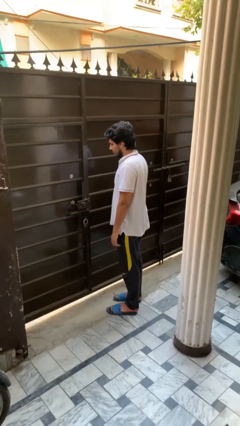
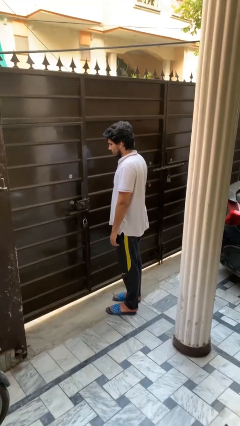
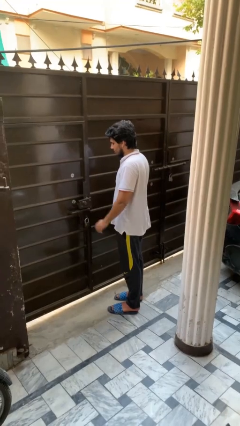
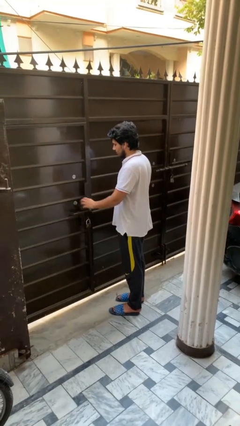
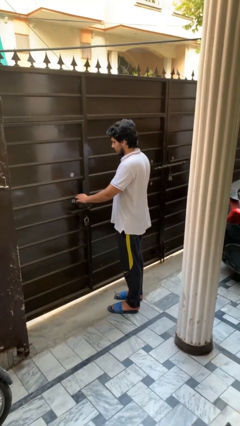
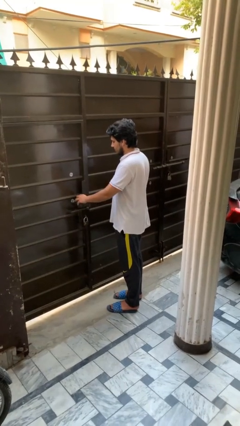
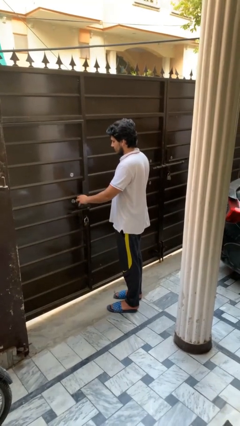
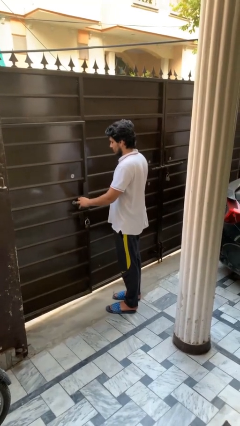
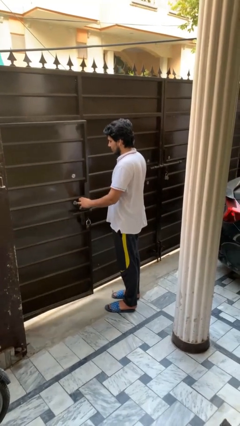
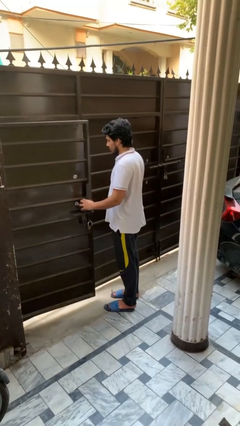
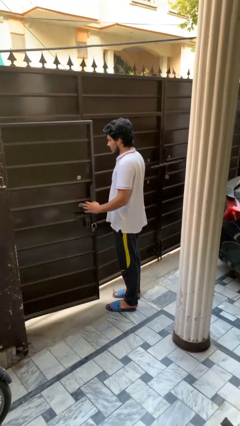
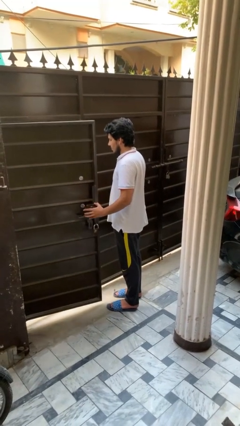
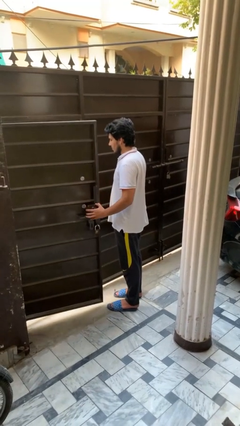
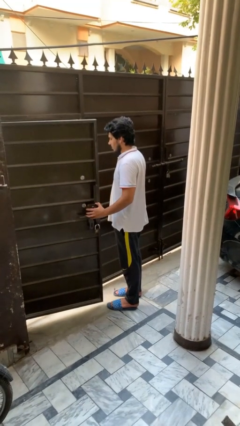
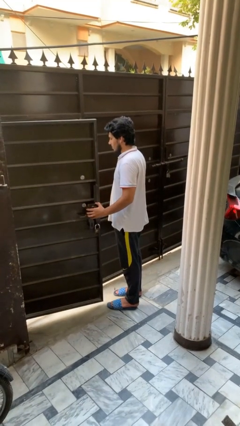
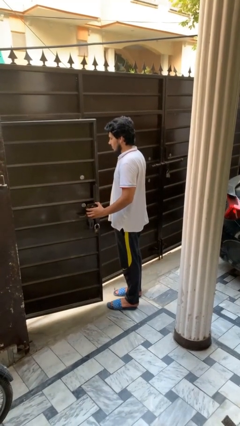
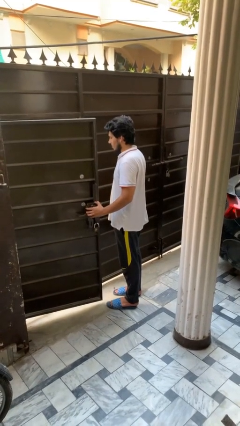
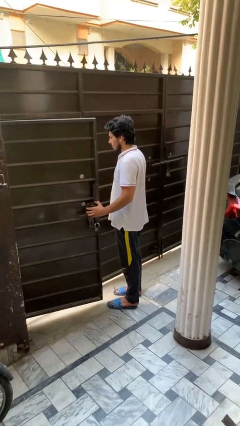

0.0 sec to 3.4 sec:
person opens gate

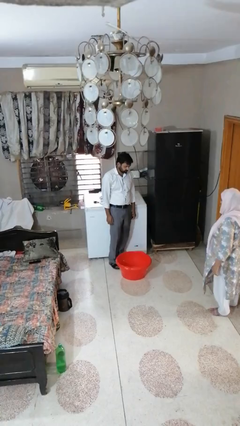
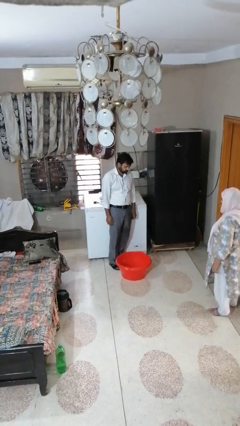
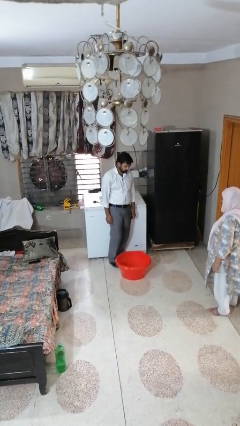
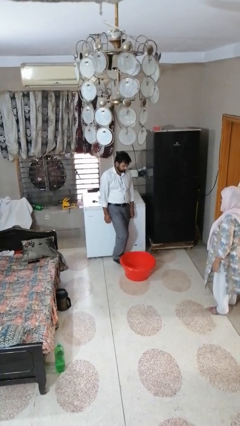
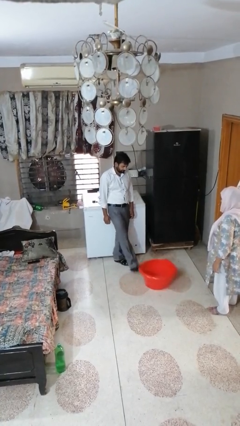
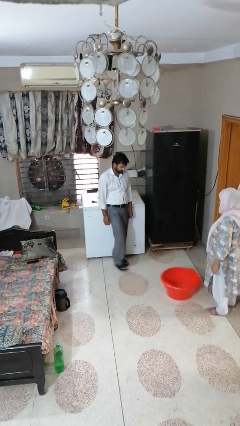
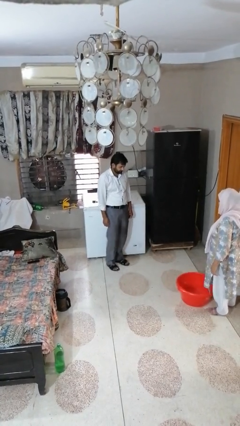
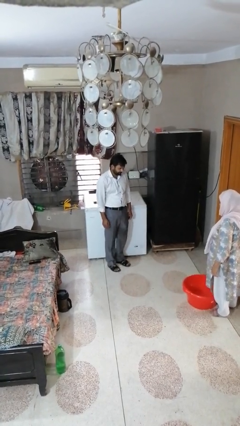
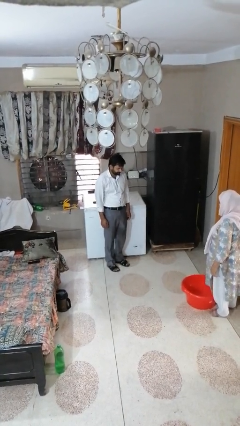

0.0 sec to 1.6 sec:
person kicks object to person

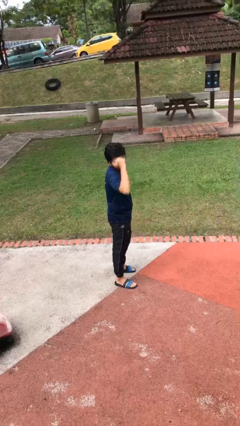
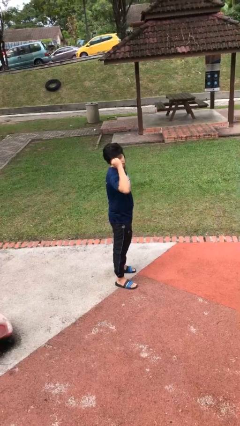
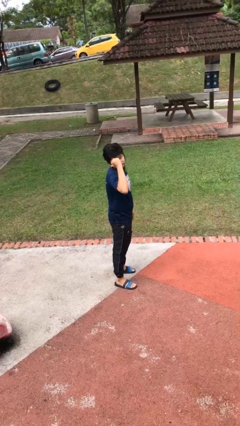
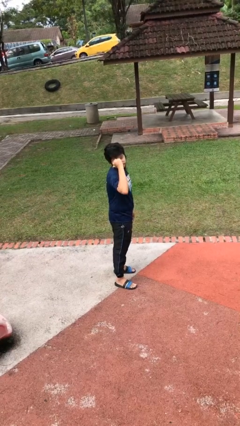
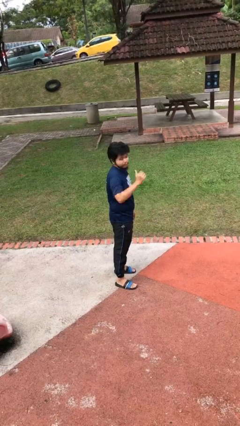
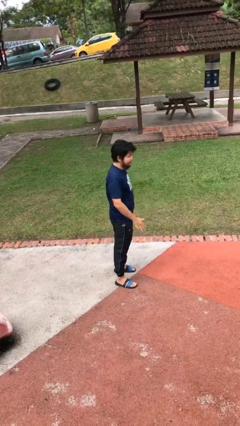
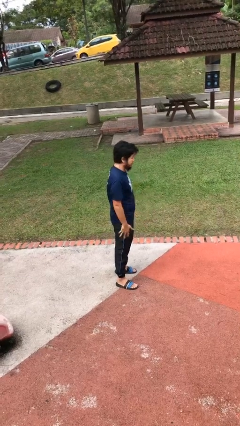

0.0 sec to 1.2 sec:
person gestures behind me

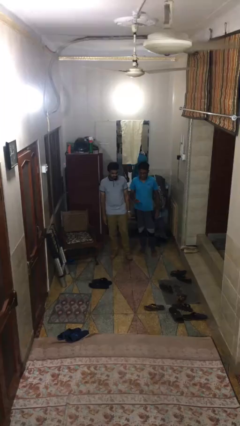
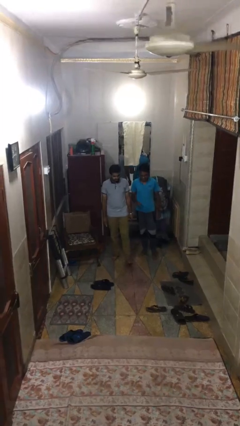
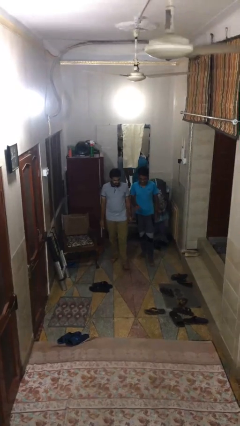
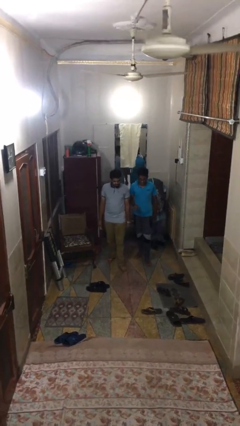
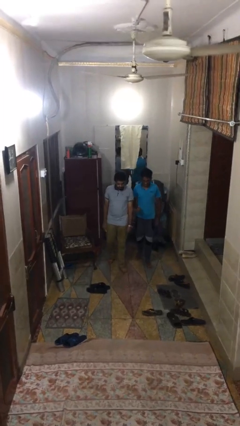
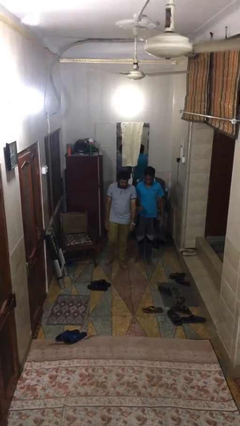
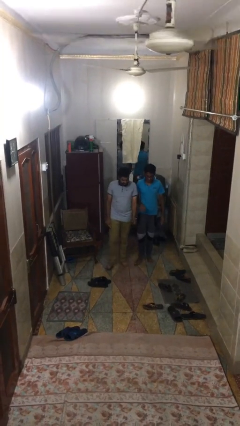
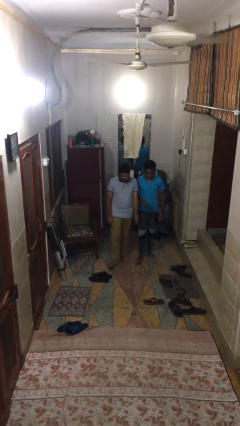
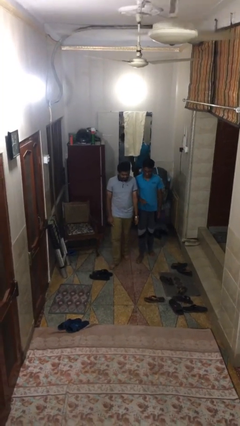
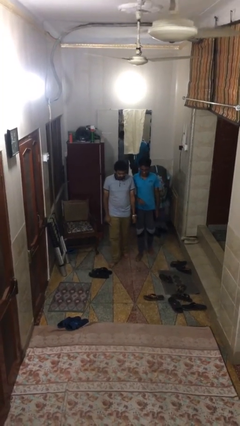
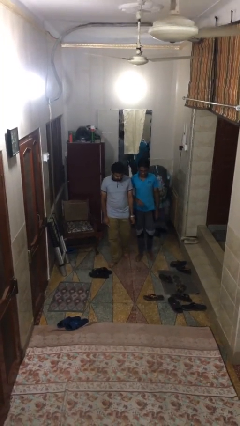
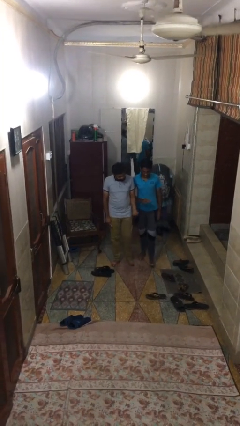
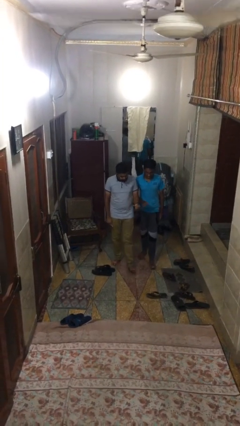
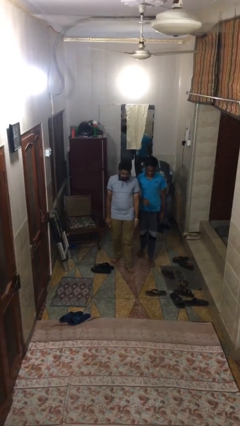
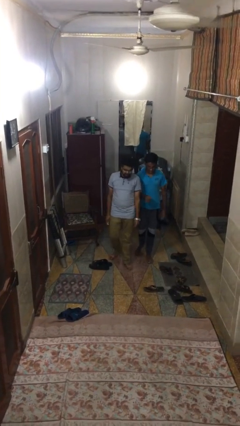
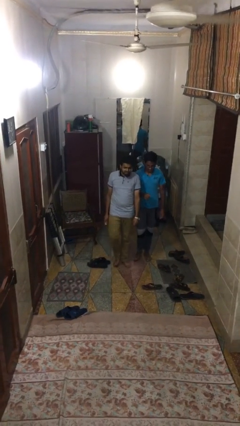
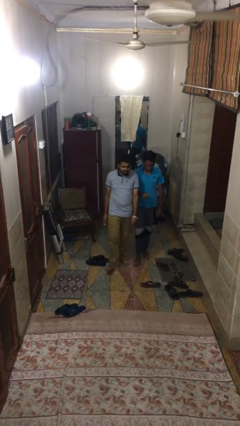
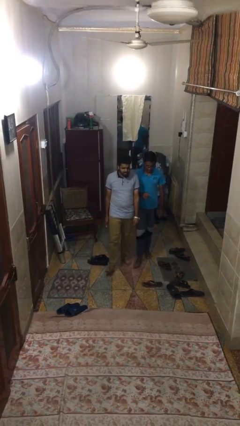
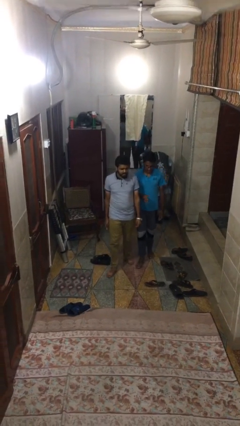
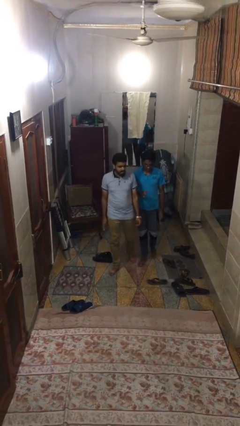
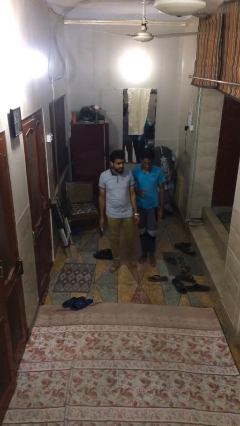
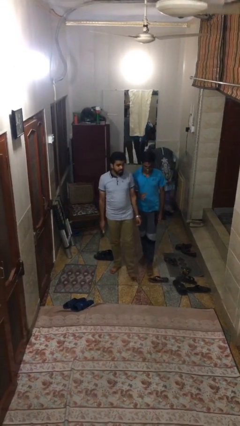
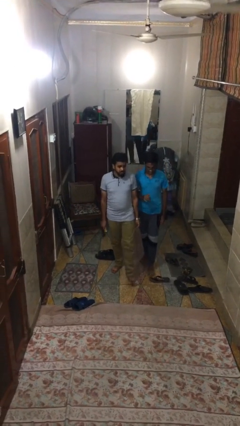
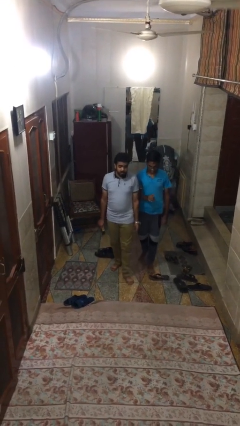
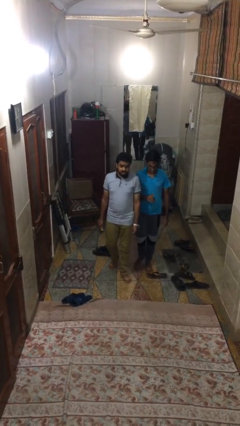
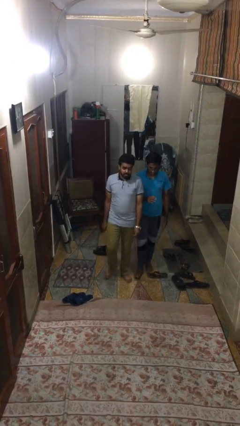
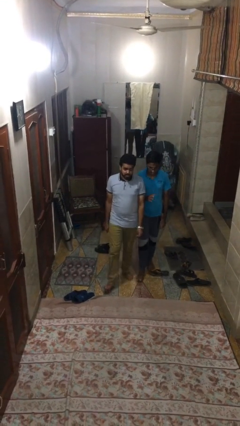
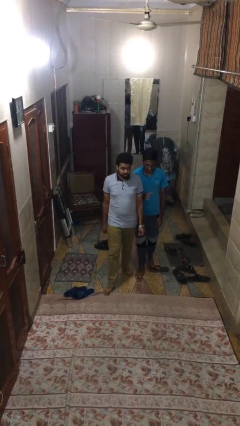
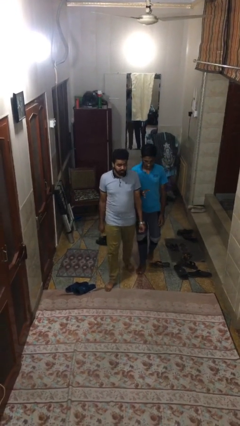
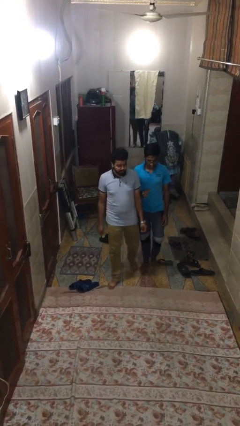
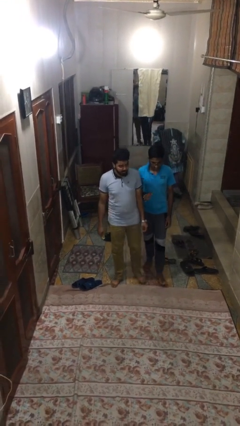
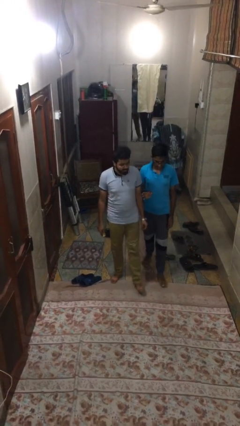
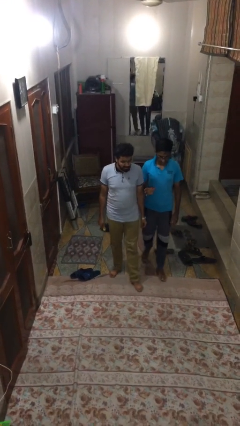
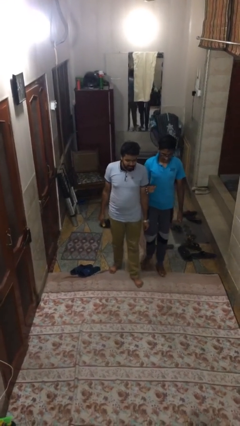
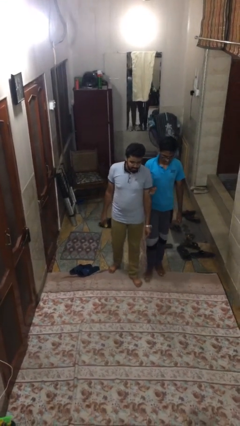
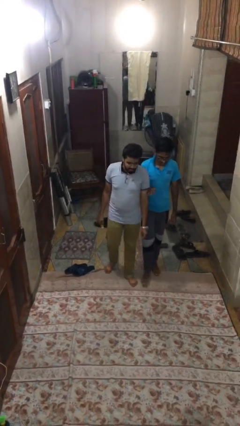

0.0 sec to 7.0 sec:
person talks to person

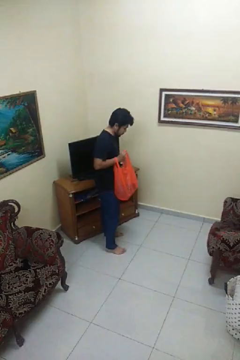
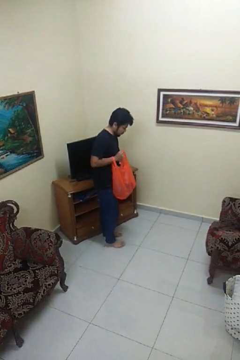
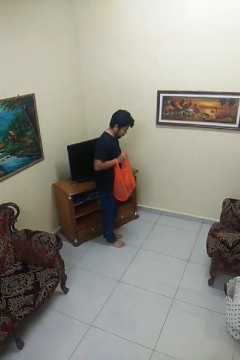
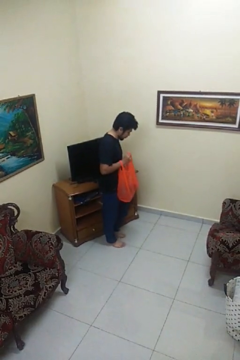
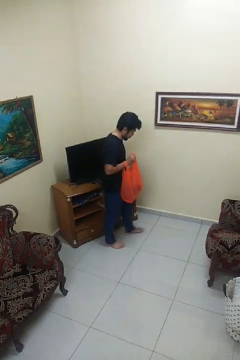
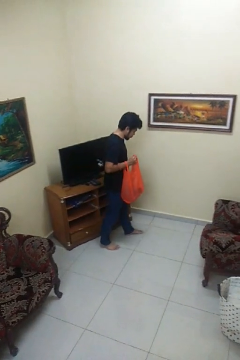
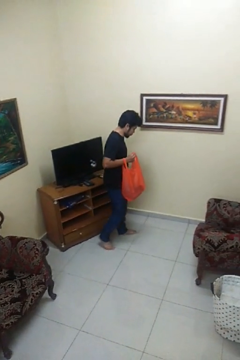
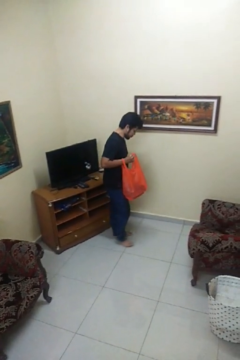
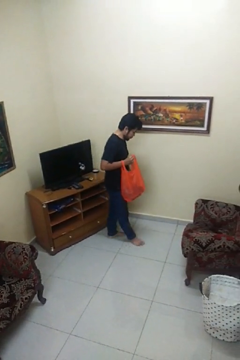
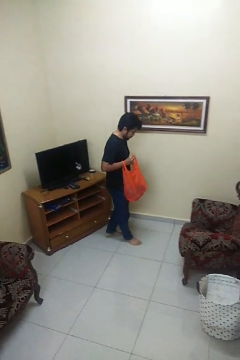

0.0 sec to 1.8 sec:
person carries groceries

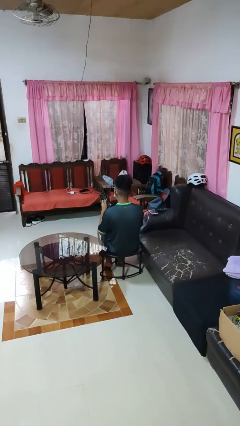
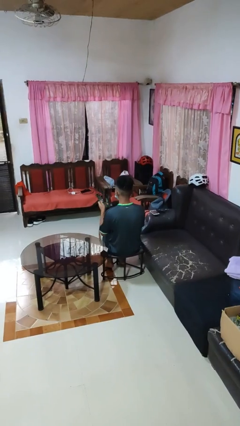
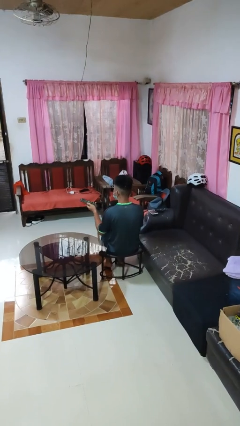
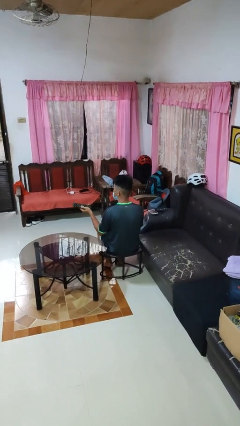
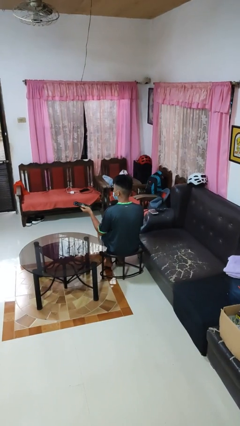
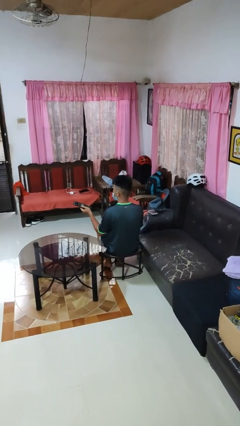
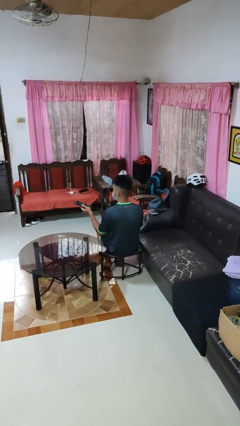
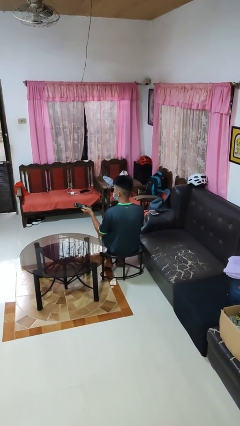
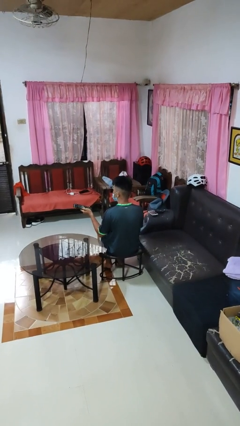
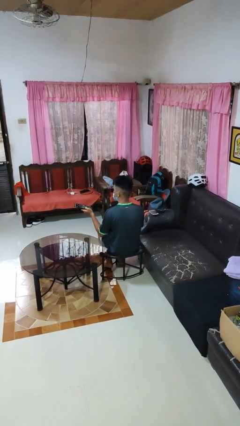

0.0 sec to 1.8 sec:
person uses television remote

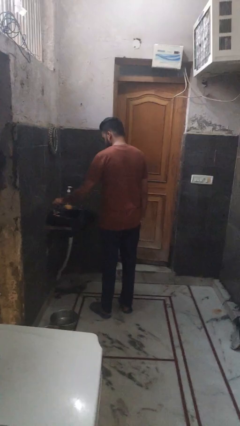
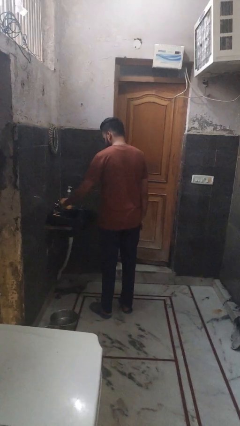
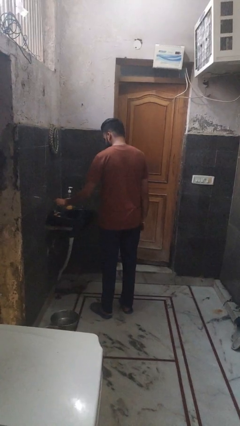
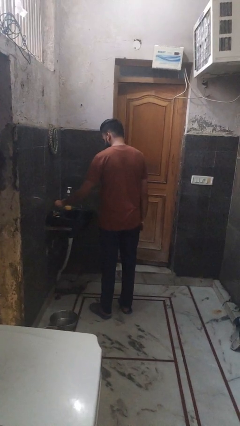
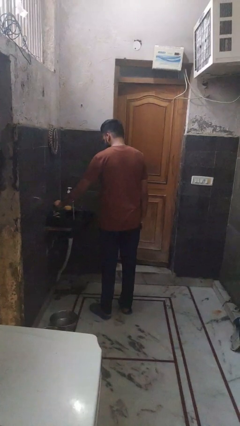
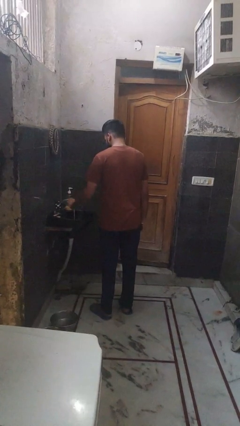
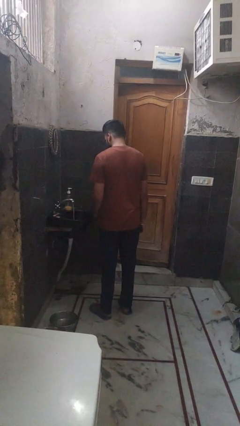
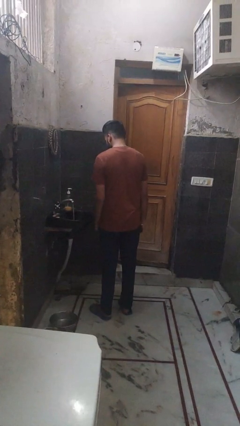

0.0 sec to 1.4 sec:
person turns on faucet
